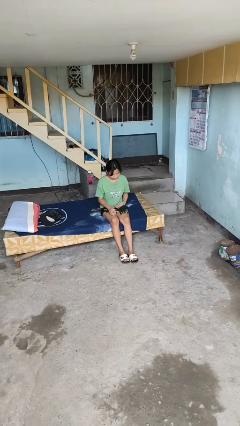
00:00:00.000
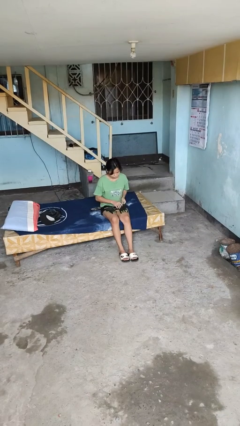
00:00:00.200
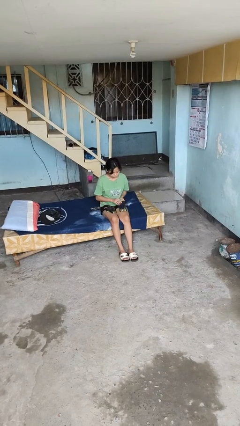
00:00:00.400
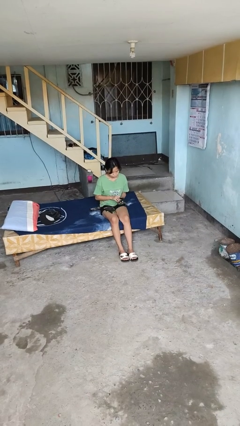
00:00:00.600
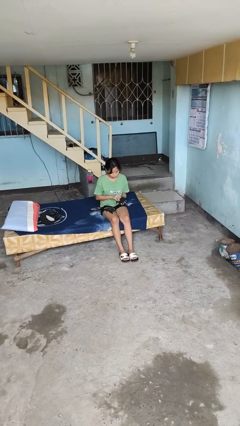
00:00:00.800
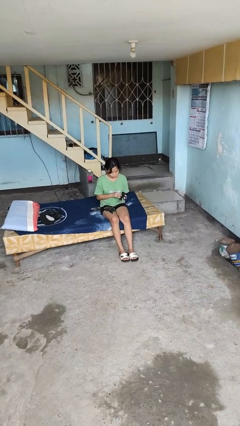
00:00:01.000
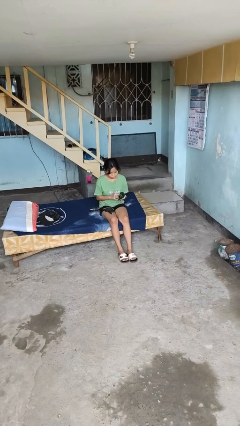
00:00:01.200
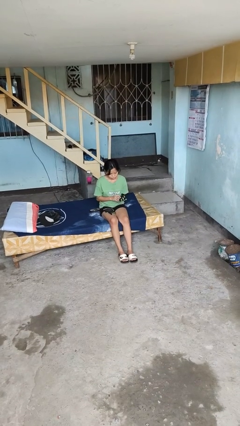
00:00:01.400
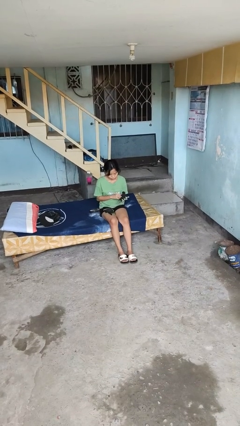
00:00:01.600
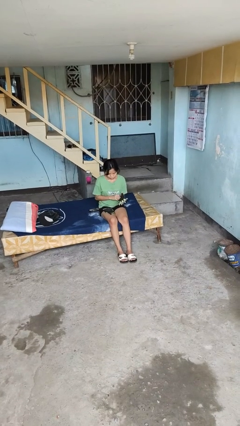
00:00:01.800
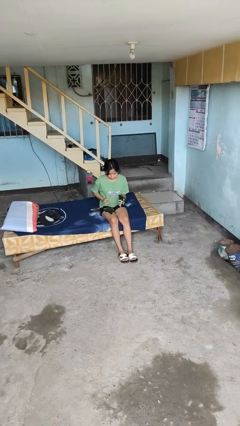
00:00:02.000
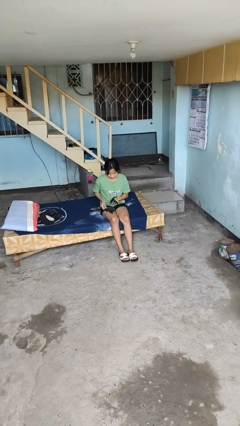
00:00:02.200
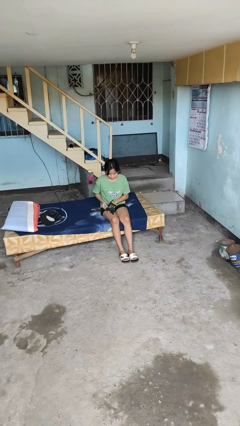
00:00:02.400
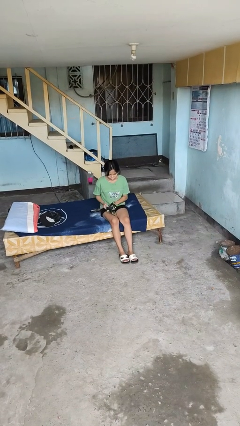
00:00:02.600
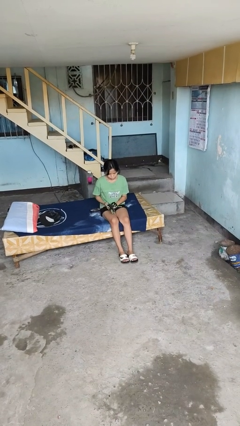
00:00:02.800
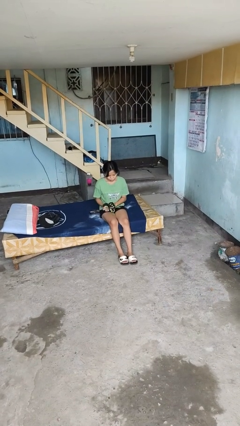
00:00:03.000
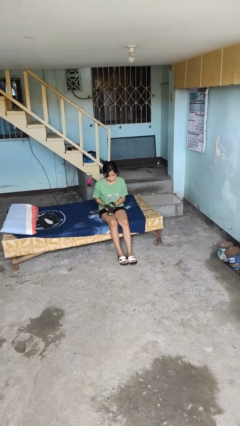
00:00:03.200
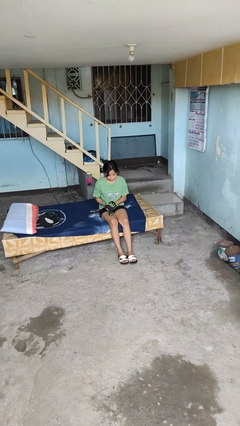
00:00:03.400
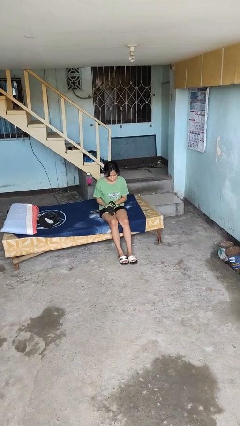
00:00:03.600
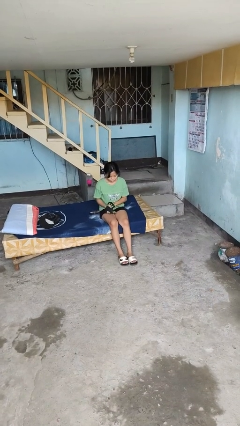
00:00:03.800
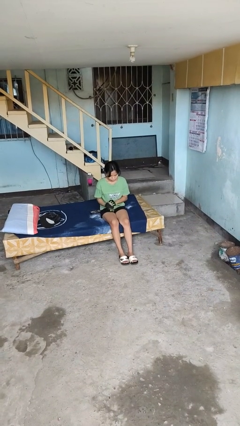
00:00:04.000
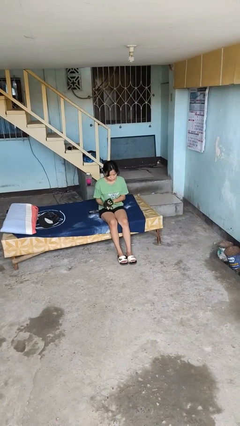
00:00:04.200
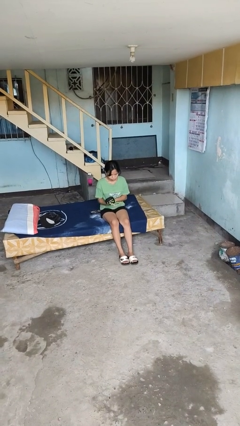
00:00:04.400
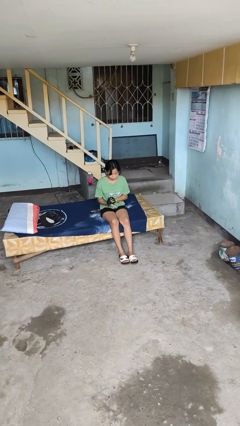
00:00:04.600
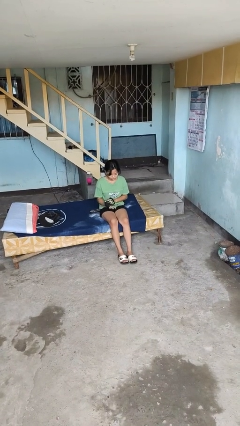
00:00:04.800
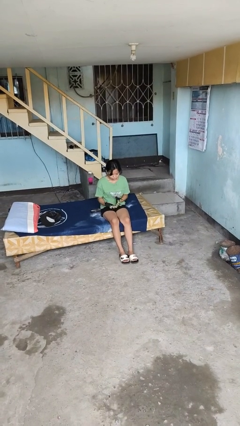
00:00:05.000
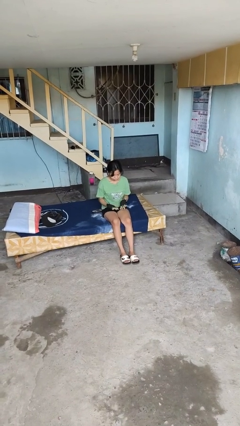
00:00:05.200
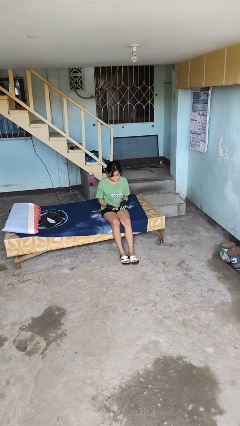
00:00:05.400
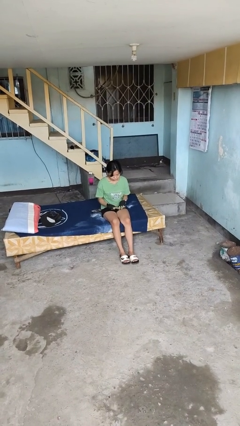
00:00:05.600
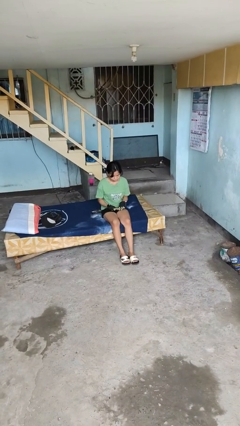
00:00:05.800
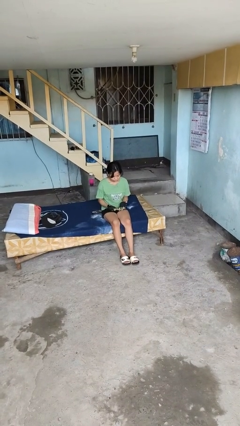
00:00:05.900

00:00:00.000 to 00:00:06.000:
person puts on gloves

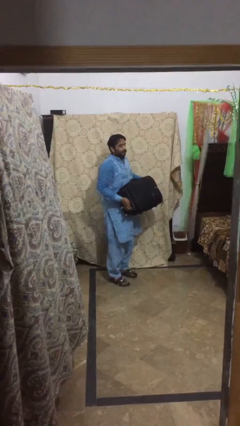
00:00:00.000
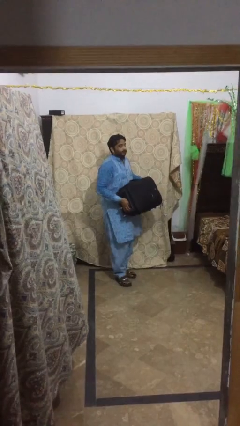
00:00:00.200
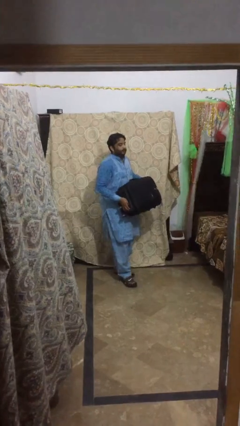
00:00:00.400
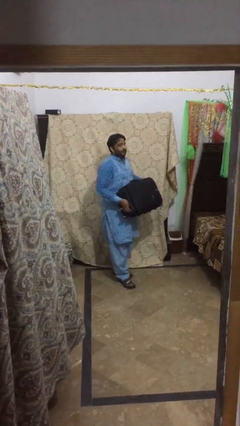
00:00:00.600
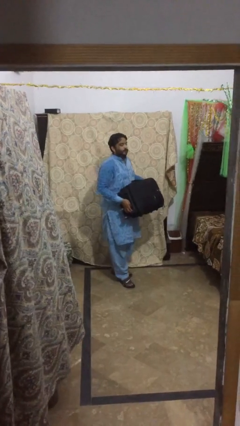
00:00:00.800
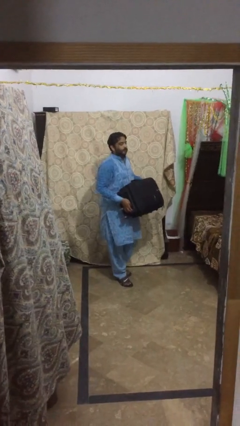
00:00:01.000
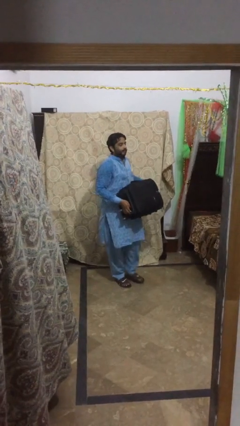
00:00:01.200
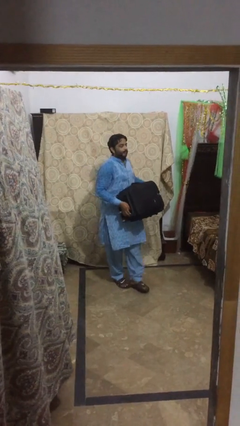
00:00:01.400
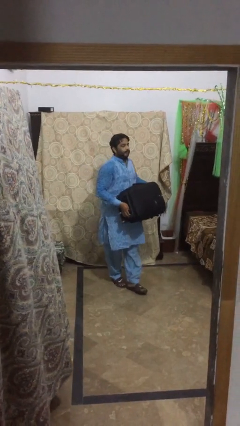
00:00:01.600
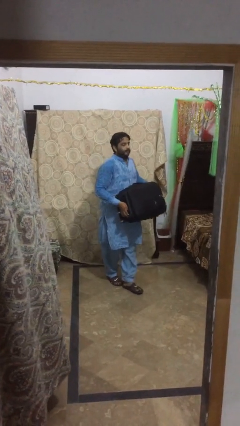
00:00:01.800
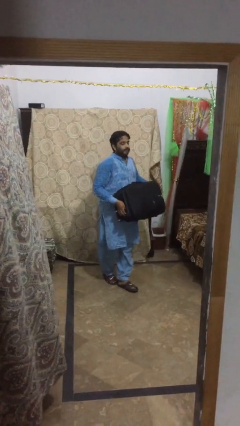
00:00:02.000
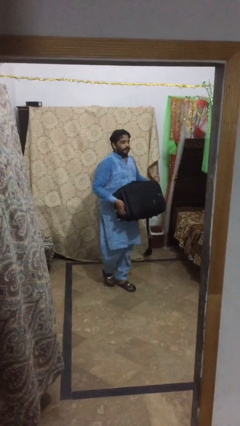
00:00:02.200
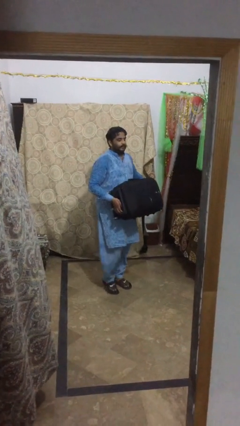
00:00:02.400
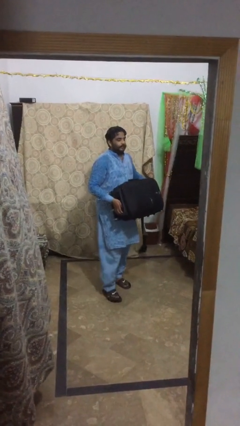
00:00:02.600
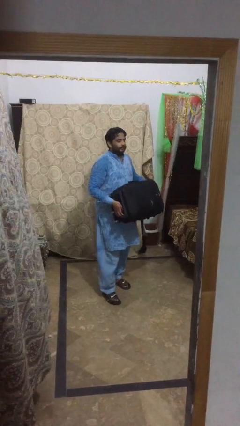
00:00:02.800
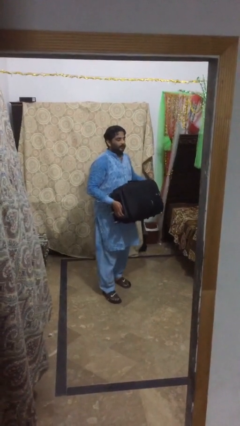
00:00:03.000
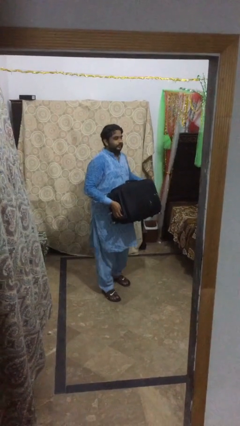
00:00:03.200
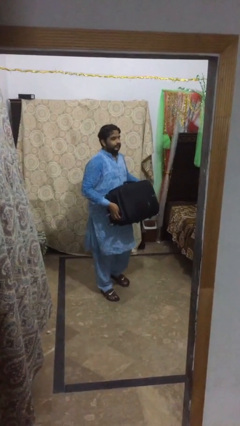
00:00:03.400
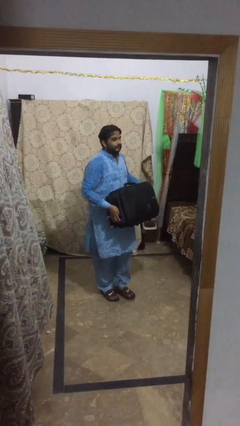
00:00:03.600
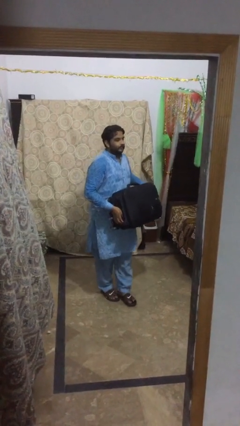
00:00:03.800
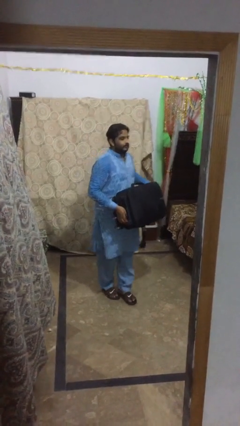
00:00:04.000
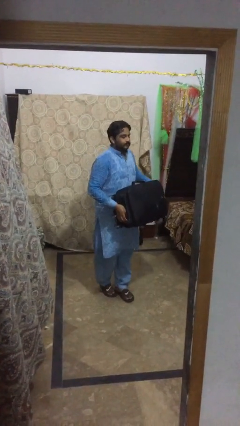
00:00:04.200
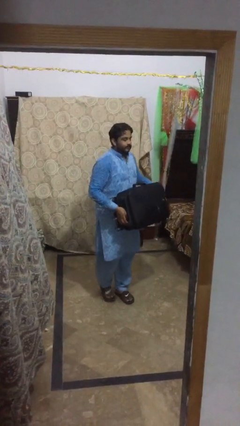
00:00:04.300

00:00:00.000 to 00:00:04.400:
person carries heavy object

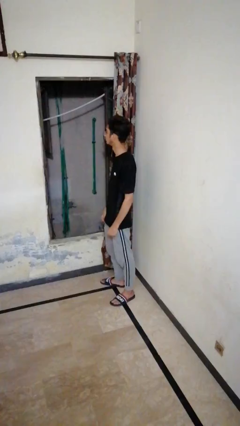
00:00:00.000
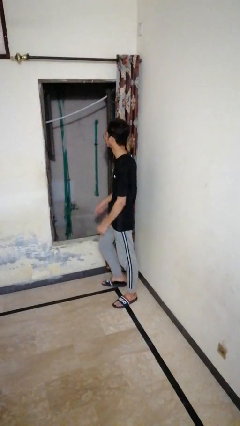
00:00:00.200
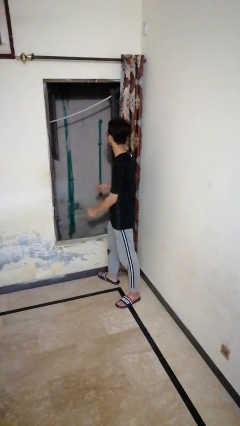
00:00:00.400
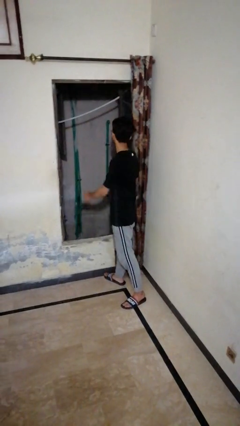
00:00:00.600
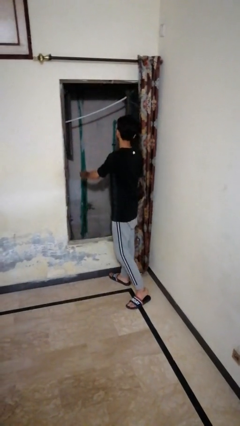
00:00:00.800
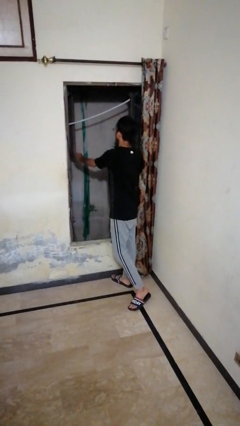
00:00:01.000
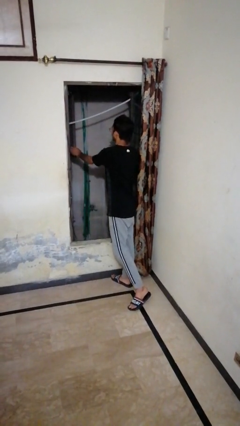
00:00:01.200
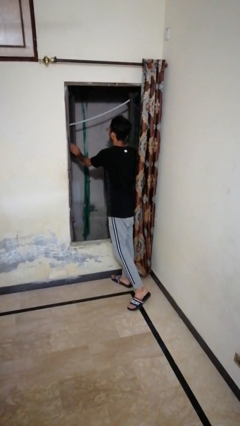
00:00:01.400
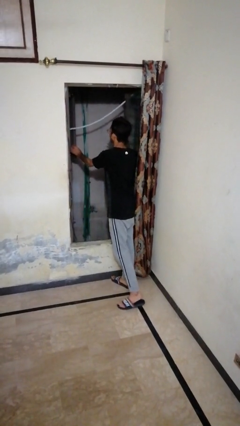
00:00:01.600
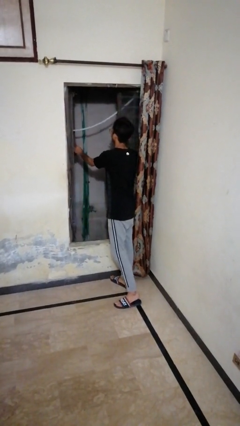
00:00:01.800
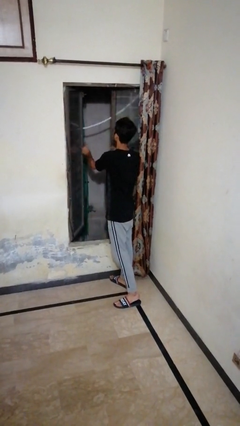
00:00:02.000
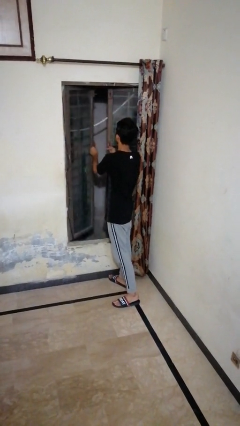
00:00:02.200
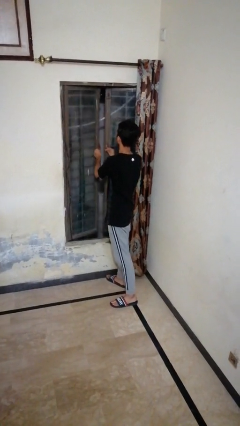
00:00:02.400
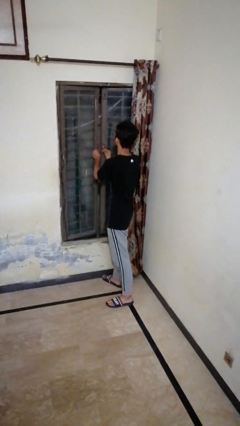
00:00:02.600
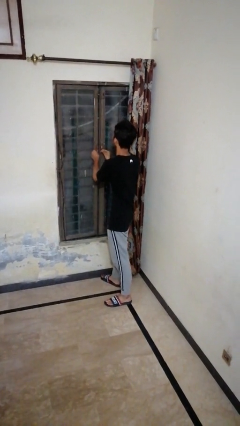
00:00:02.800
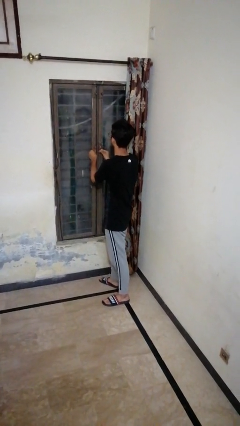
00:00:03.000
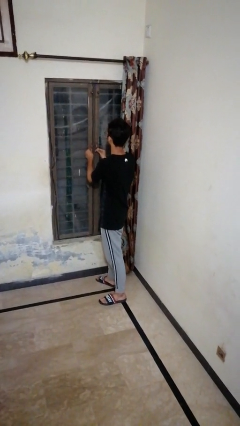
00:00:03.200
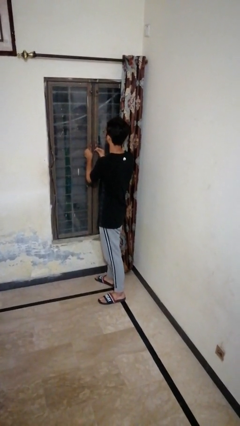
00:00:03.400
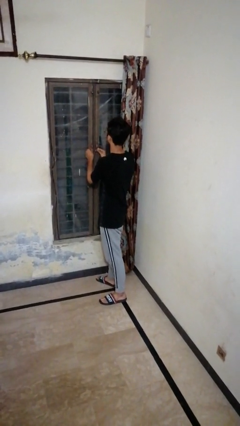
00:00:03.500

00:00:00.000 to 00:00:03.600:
person closes home window

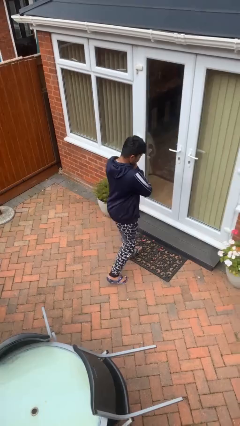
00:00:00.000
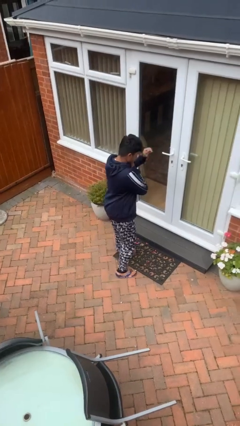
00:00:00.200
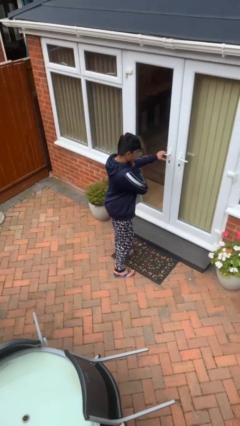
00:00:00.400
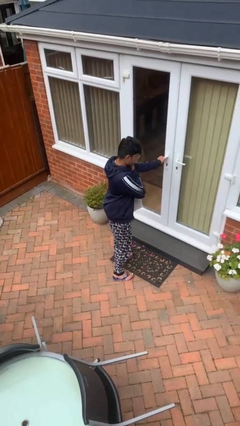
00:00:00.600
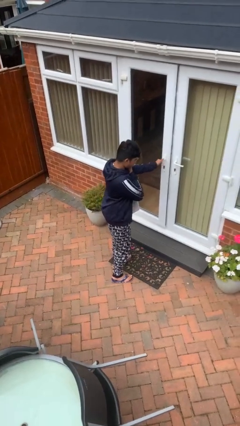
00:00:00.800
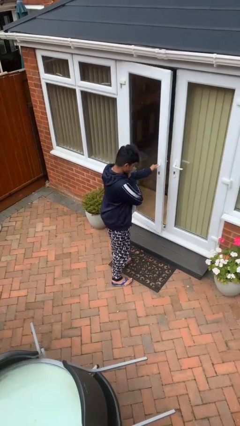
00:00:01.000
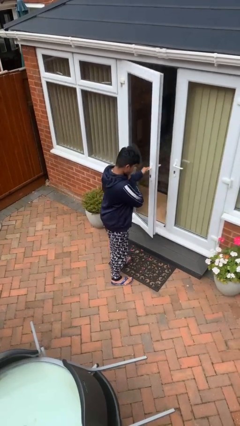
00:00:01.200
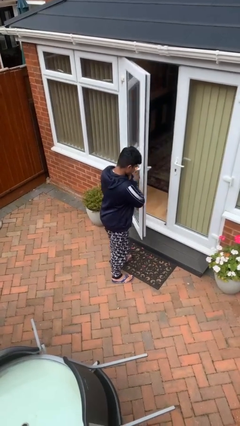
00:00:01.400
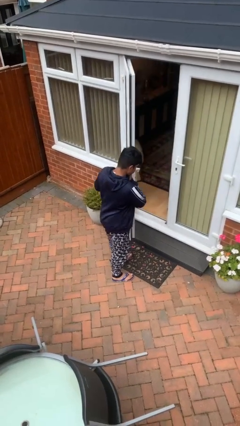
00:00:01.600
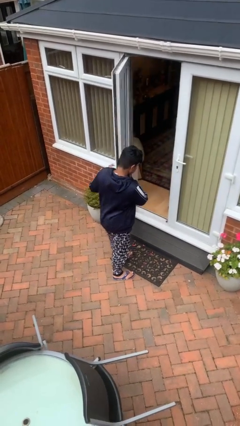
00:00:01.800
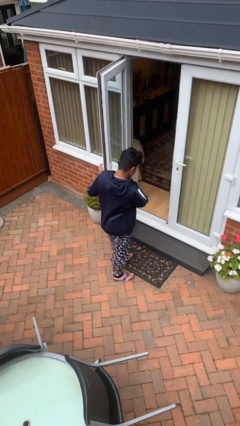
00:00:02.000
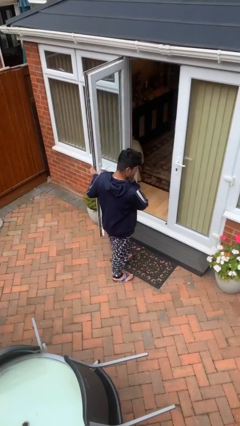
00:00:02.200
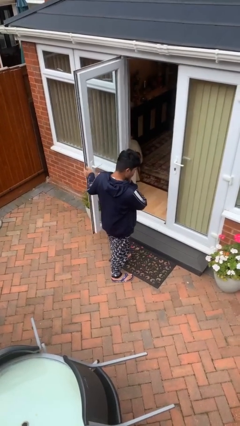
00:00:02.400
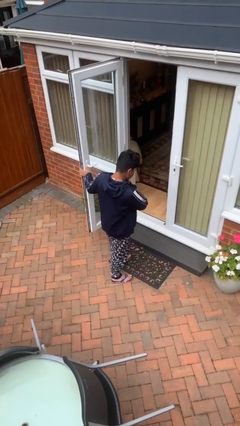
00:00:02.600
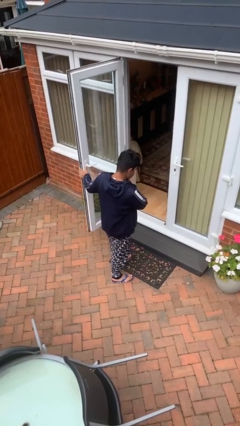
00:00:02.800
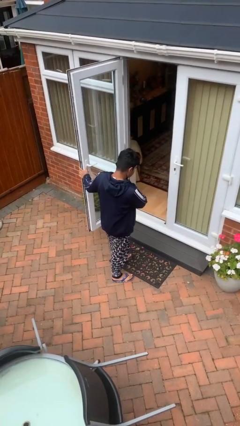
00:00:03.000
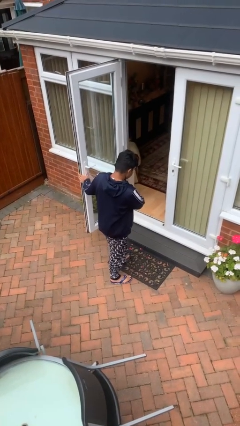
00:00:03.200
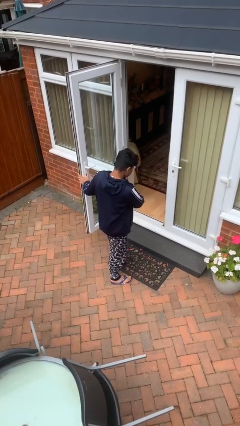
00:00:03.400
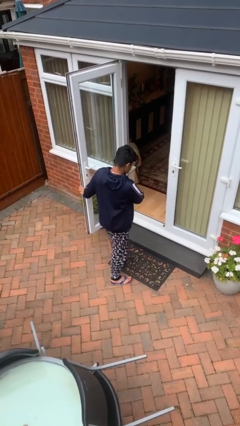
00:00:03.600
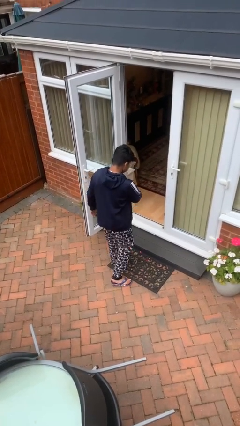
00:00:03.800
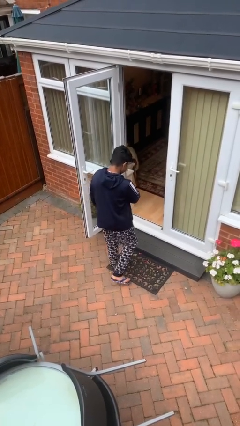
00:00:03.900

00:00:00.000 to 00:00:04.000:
person opens facility door
